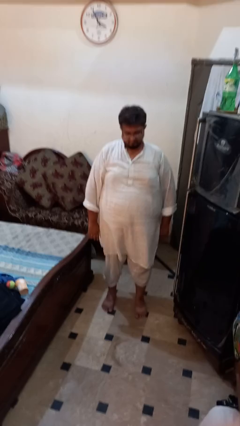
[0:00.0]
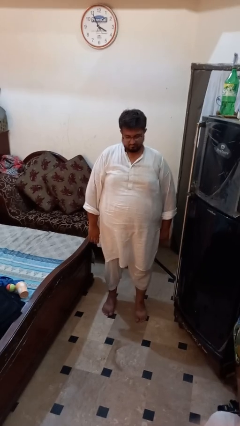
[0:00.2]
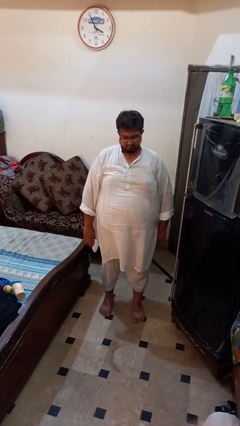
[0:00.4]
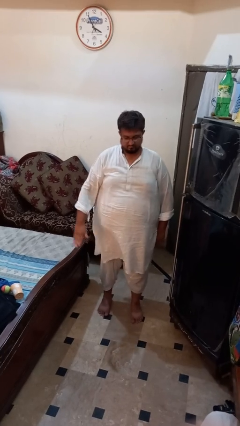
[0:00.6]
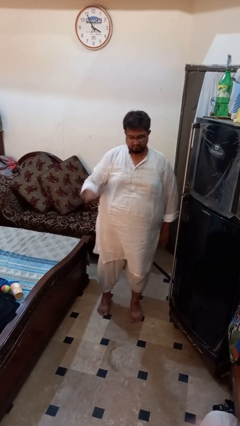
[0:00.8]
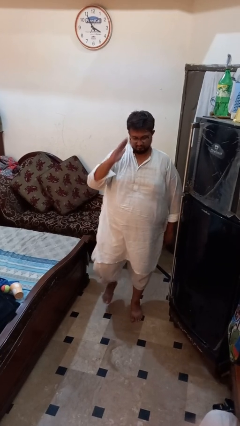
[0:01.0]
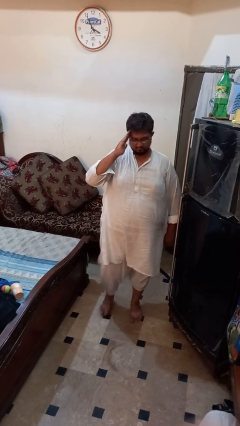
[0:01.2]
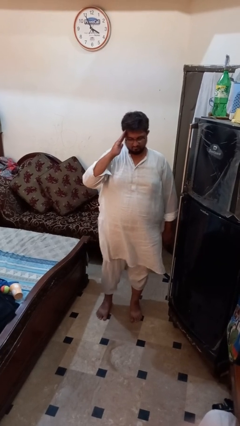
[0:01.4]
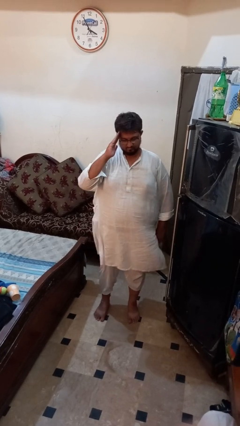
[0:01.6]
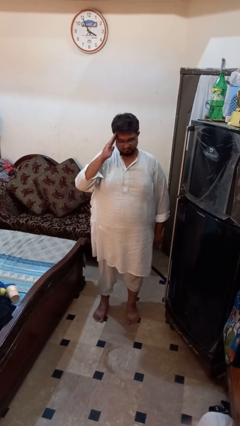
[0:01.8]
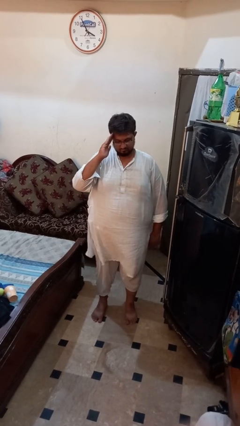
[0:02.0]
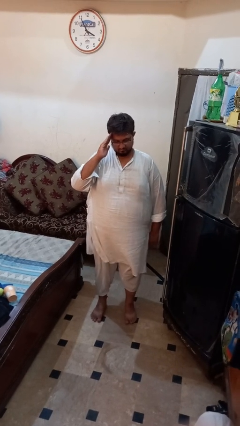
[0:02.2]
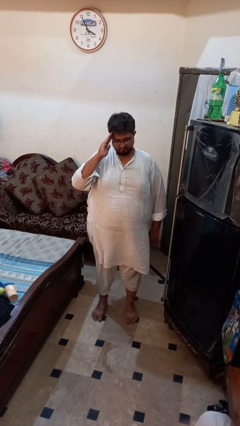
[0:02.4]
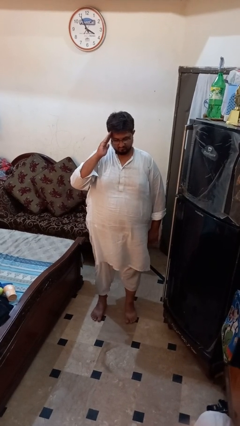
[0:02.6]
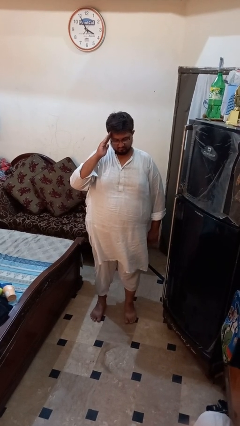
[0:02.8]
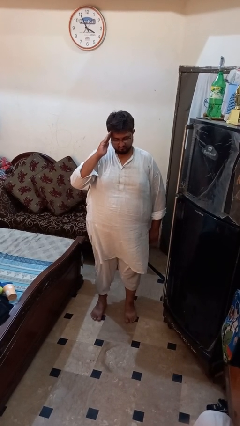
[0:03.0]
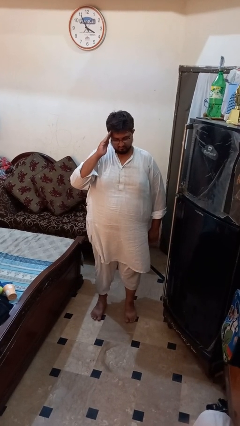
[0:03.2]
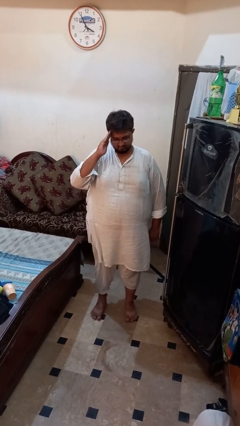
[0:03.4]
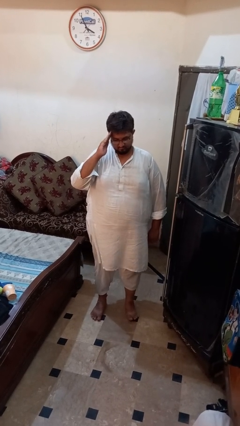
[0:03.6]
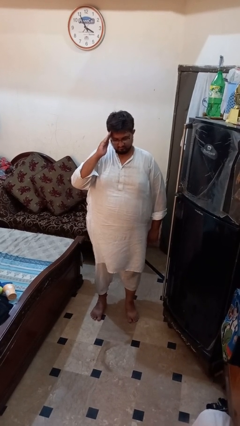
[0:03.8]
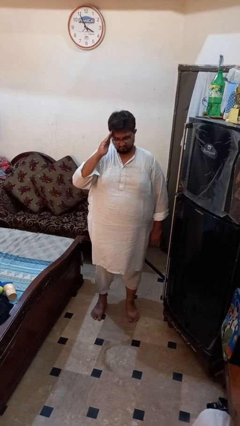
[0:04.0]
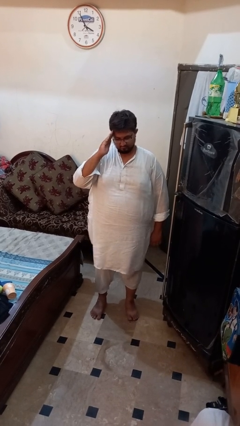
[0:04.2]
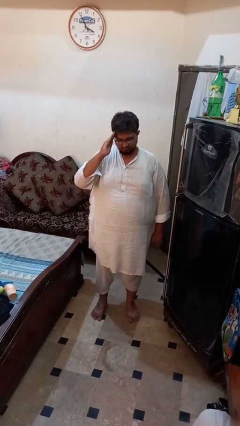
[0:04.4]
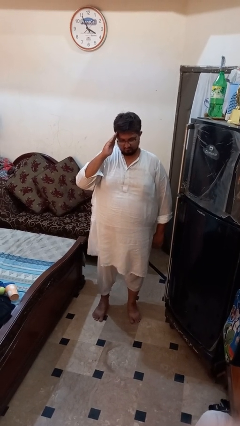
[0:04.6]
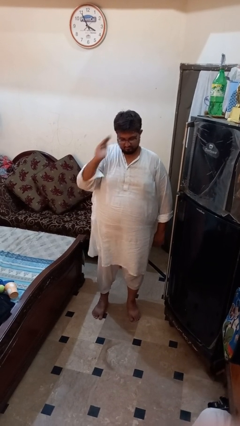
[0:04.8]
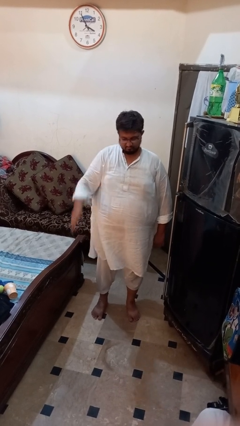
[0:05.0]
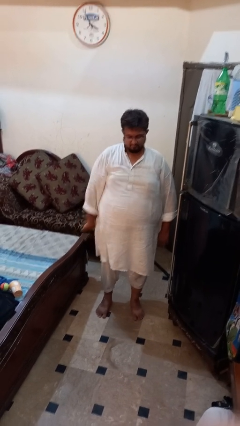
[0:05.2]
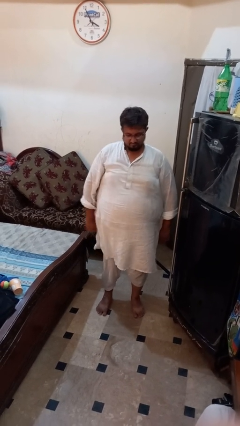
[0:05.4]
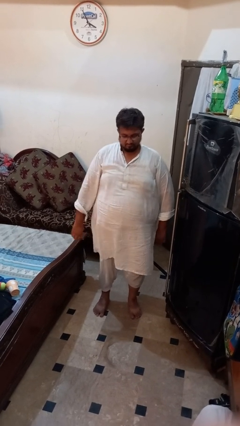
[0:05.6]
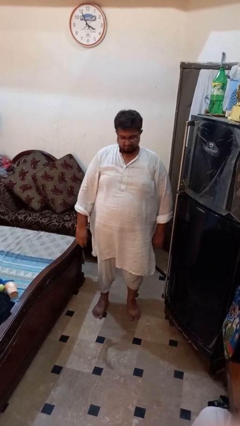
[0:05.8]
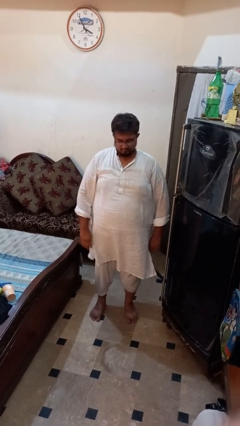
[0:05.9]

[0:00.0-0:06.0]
person salutes

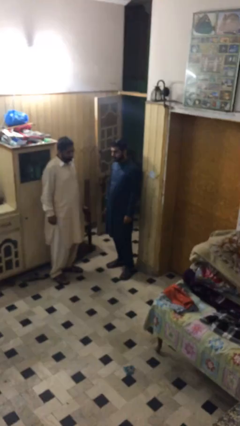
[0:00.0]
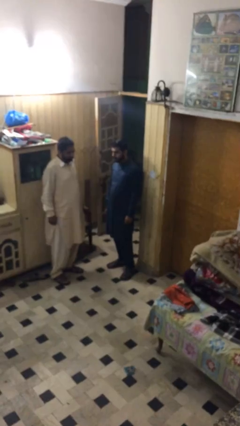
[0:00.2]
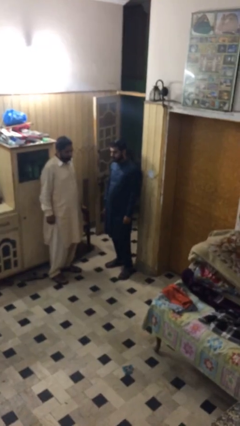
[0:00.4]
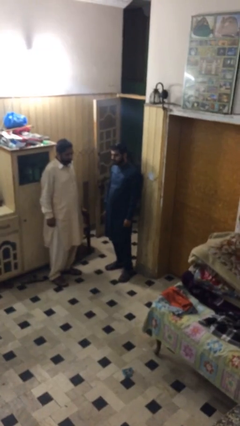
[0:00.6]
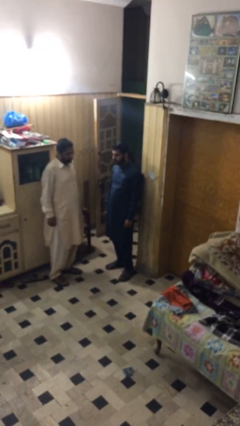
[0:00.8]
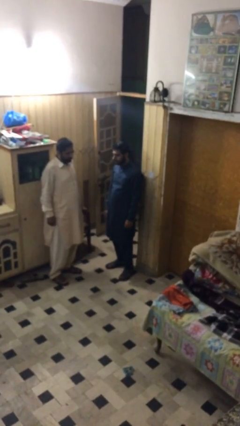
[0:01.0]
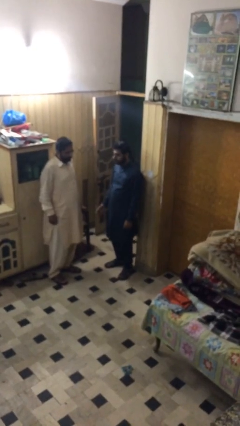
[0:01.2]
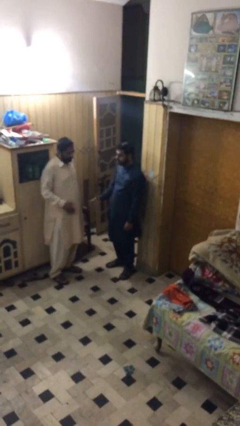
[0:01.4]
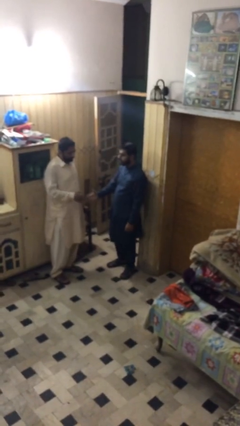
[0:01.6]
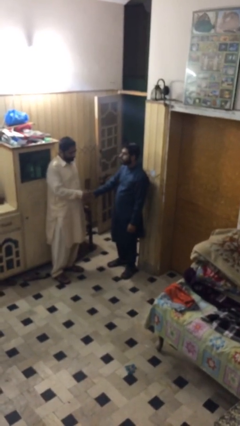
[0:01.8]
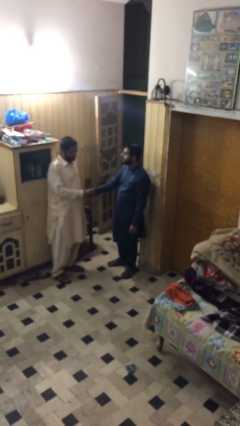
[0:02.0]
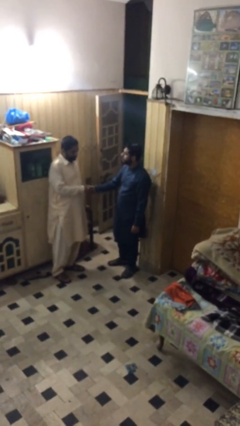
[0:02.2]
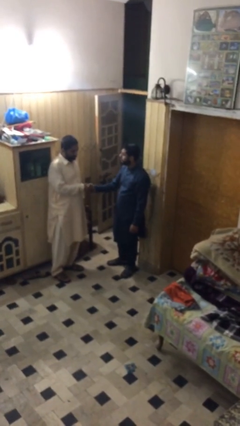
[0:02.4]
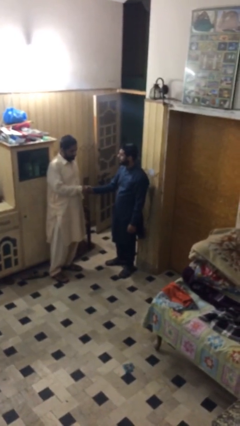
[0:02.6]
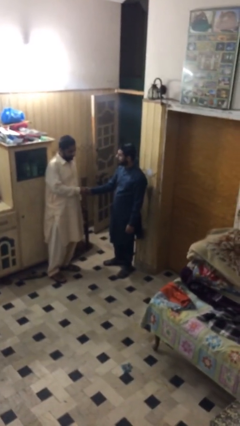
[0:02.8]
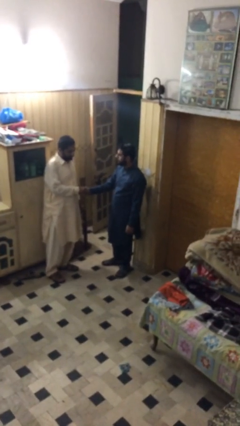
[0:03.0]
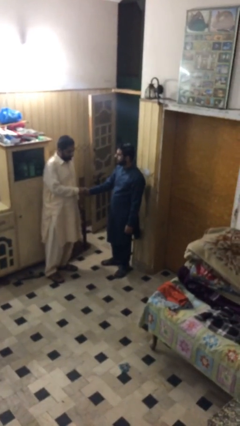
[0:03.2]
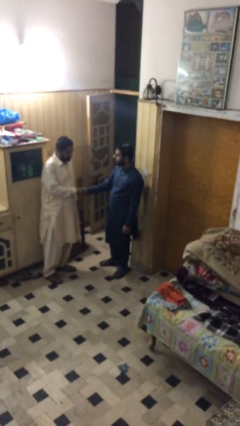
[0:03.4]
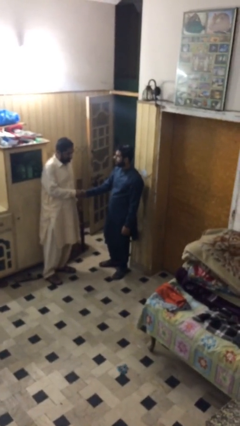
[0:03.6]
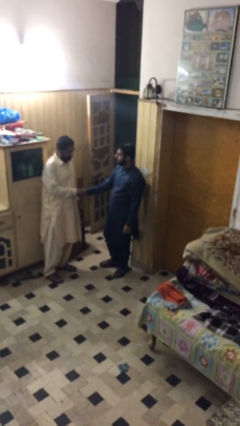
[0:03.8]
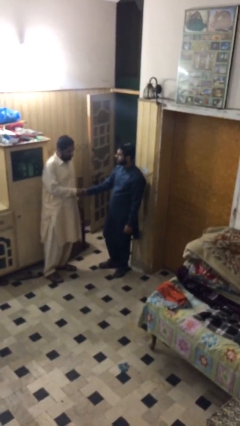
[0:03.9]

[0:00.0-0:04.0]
person shakes hand

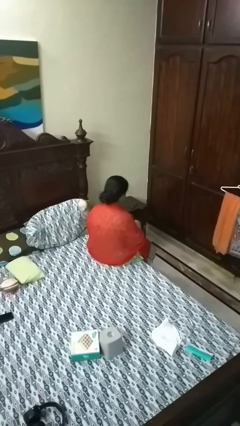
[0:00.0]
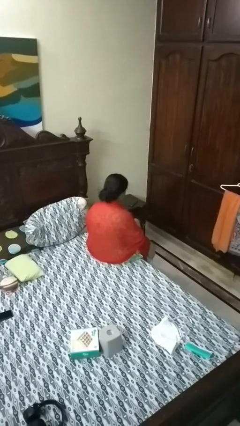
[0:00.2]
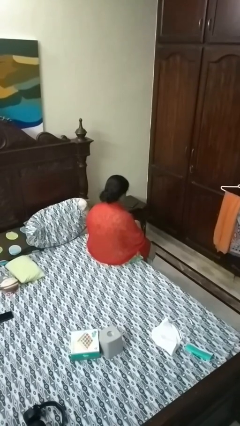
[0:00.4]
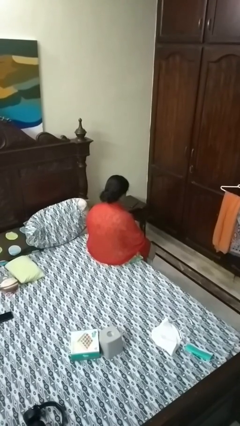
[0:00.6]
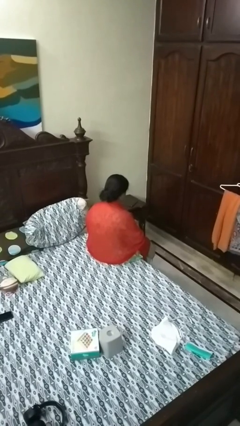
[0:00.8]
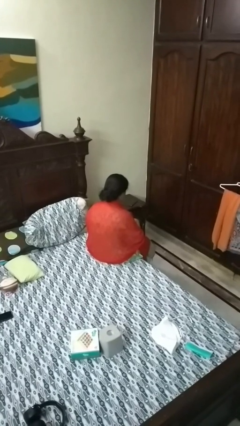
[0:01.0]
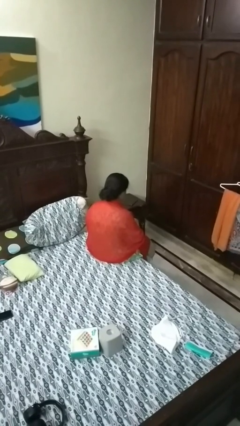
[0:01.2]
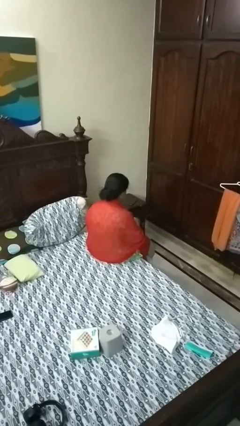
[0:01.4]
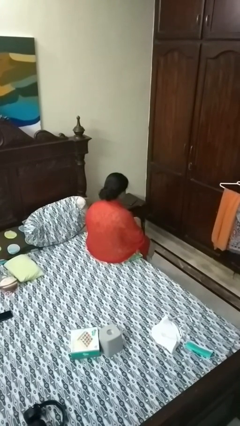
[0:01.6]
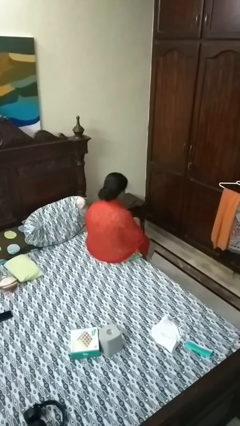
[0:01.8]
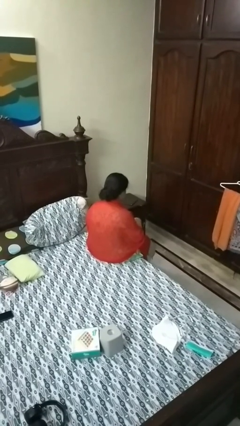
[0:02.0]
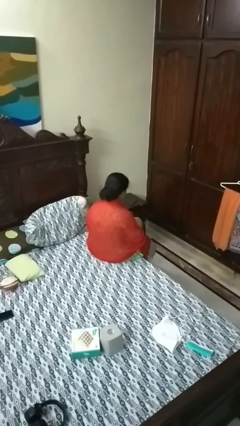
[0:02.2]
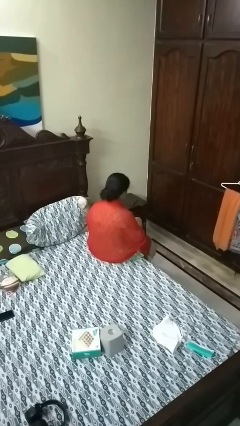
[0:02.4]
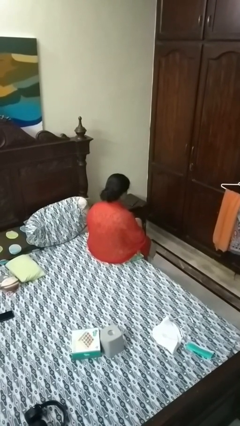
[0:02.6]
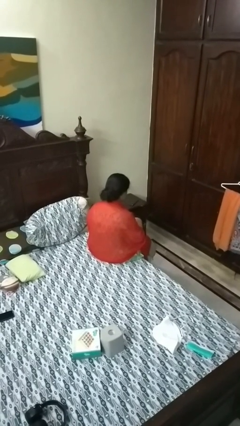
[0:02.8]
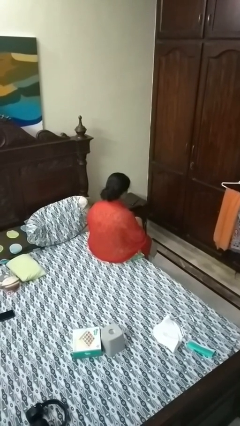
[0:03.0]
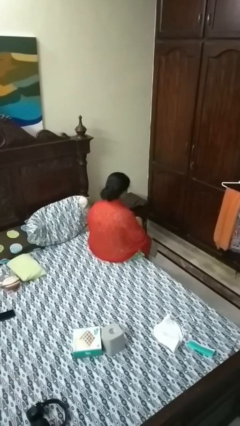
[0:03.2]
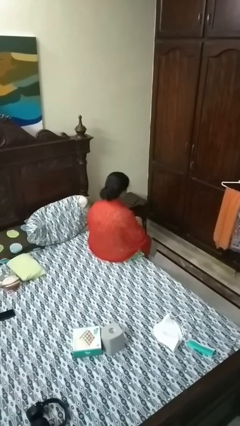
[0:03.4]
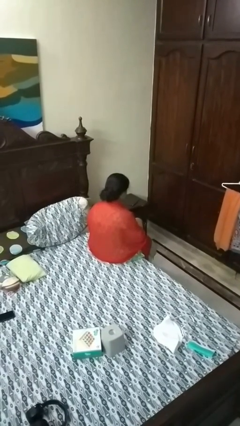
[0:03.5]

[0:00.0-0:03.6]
person searches in purse

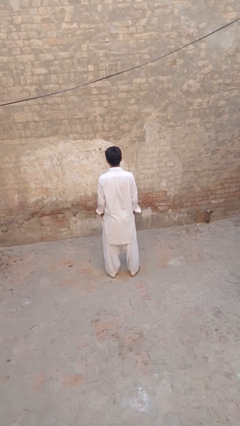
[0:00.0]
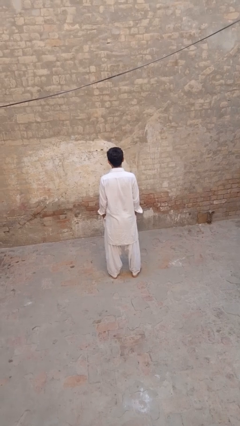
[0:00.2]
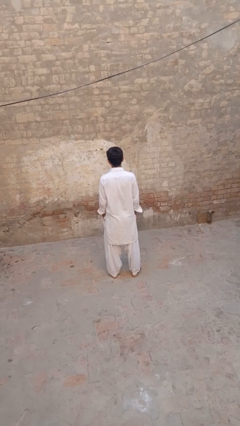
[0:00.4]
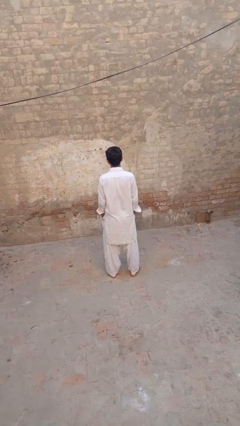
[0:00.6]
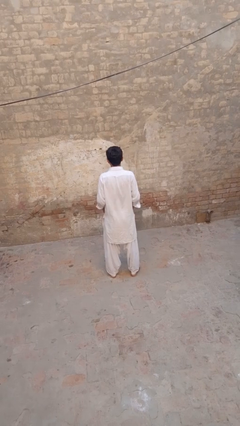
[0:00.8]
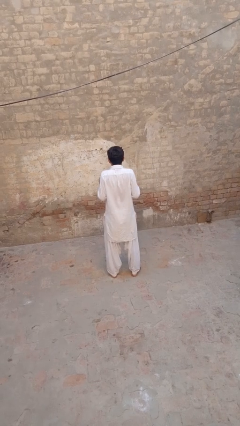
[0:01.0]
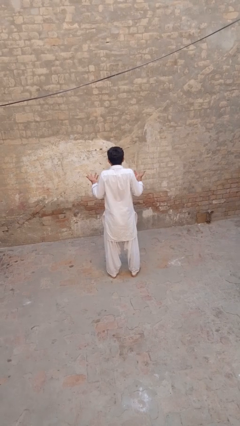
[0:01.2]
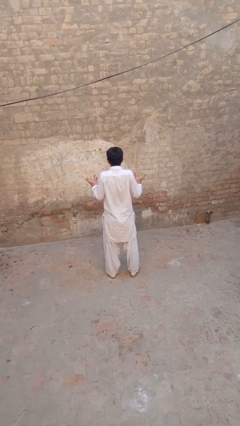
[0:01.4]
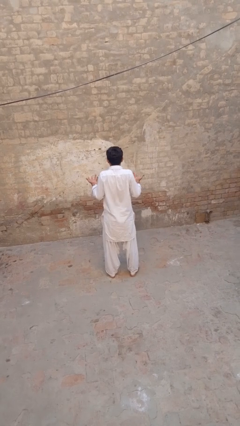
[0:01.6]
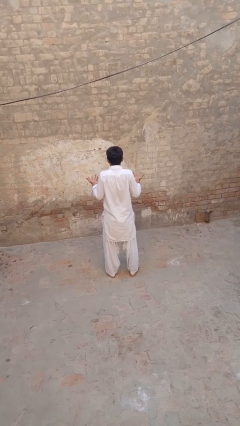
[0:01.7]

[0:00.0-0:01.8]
person shrugs

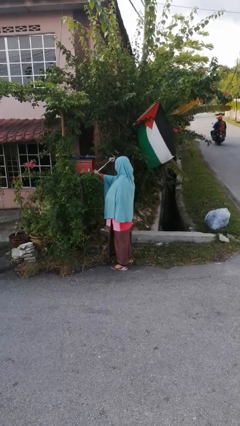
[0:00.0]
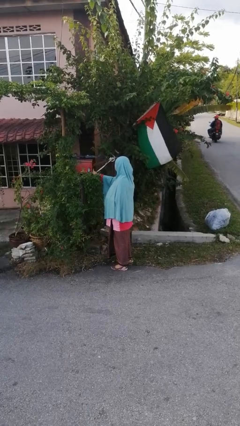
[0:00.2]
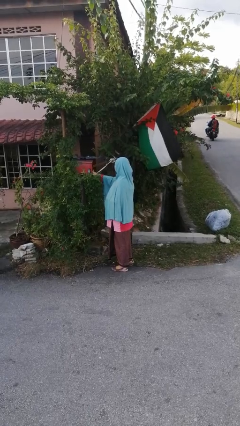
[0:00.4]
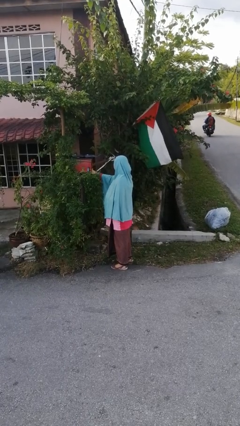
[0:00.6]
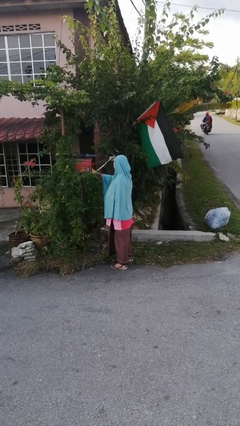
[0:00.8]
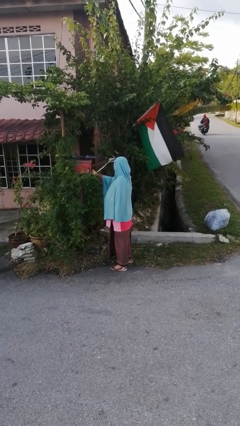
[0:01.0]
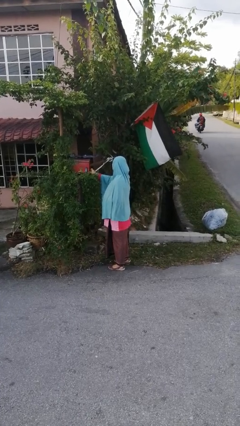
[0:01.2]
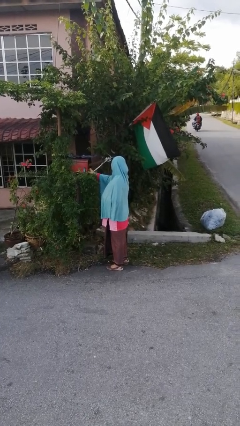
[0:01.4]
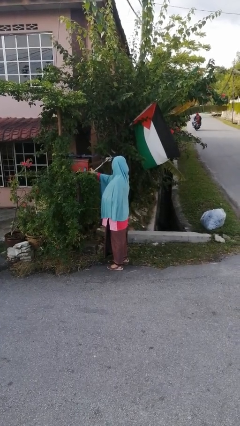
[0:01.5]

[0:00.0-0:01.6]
person closes mailbox

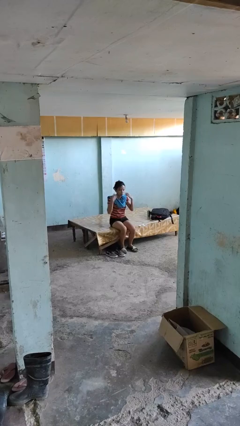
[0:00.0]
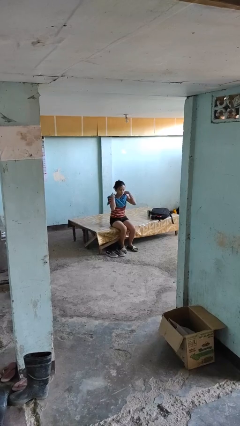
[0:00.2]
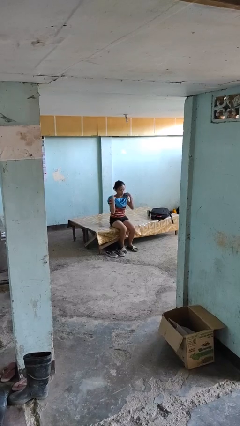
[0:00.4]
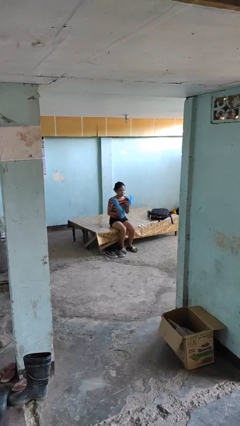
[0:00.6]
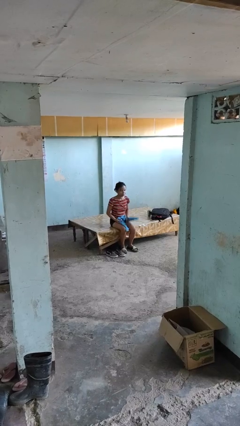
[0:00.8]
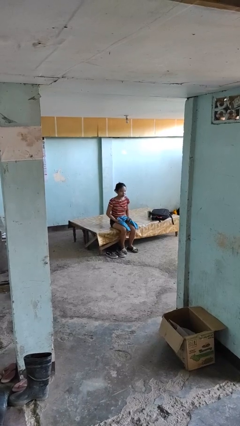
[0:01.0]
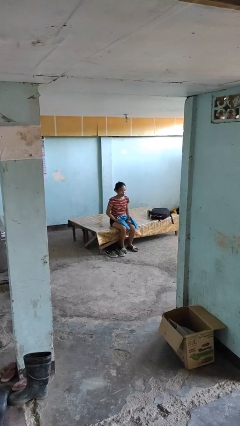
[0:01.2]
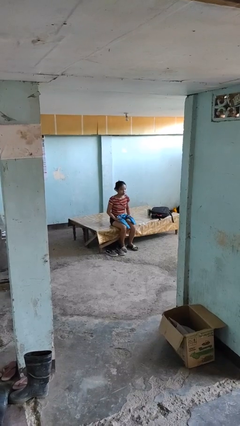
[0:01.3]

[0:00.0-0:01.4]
person takes off scarf
